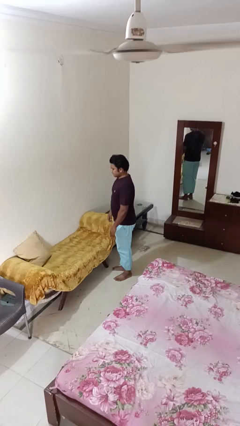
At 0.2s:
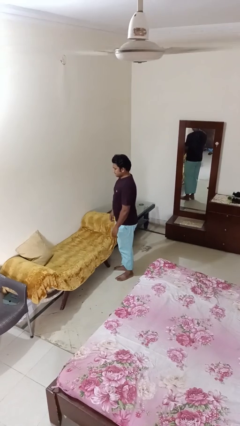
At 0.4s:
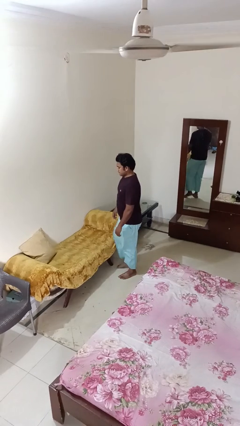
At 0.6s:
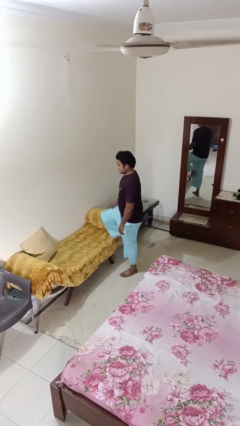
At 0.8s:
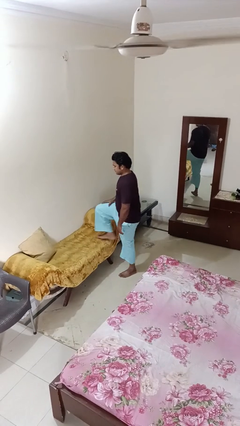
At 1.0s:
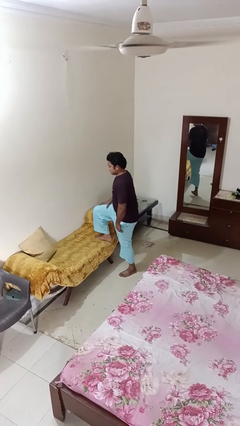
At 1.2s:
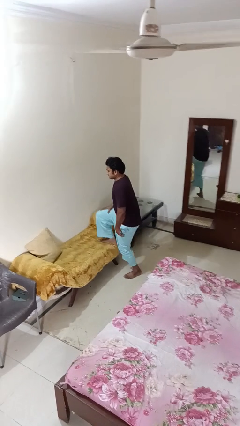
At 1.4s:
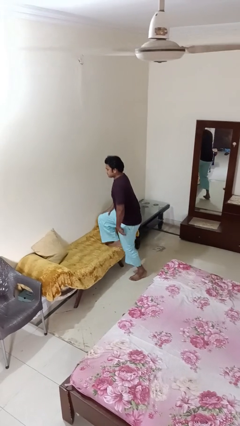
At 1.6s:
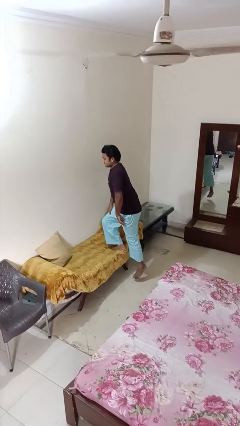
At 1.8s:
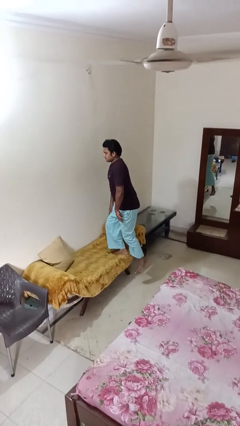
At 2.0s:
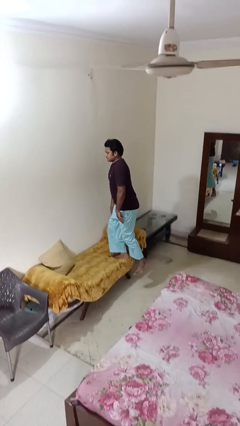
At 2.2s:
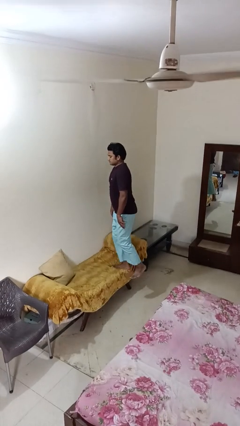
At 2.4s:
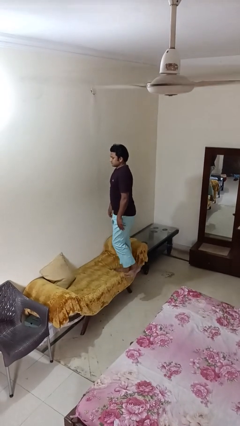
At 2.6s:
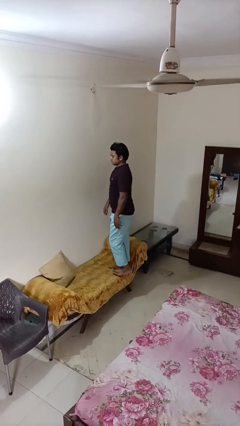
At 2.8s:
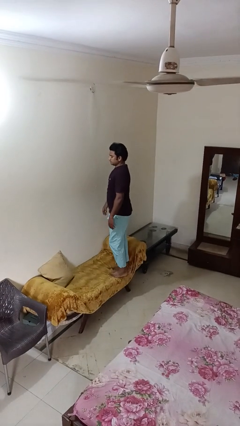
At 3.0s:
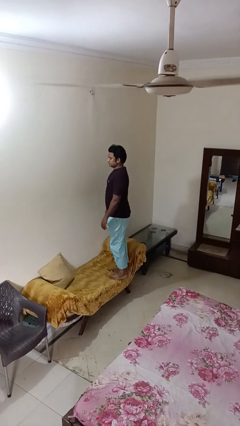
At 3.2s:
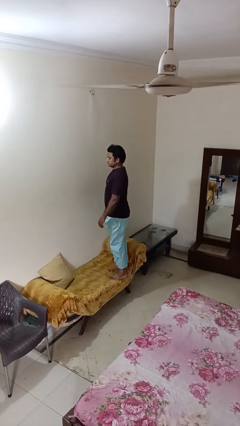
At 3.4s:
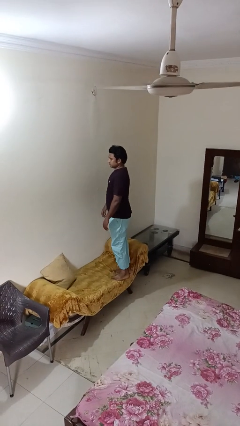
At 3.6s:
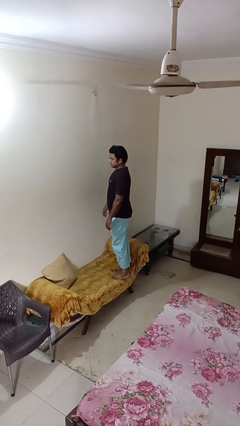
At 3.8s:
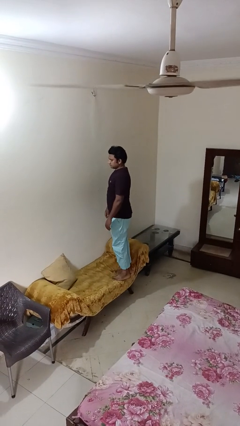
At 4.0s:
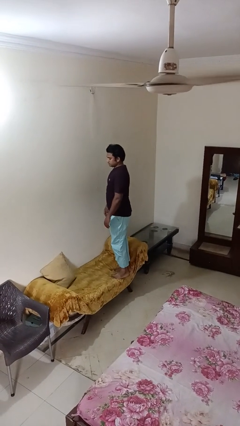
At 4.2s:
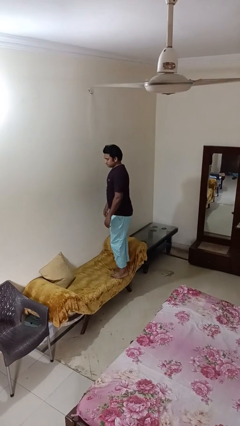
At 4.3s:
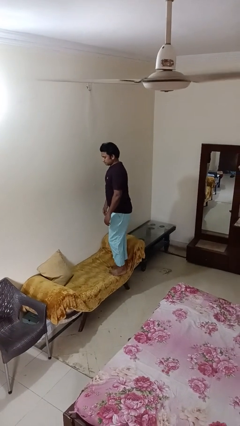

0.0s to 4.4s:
person climbs on couch

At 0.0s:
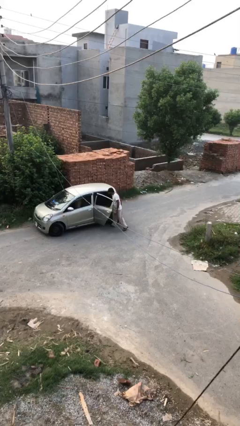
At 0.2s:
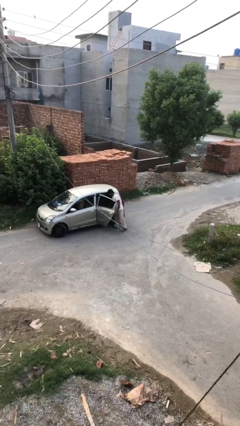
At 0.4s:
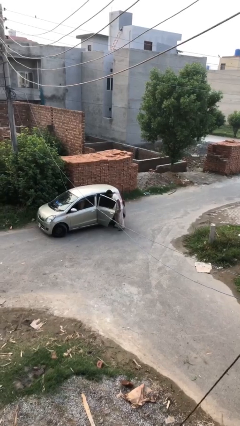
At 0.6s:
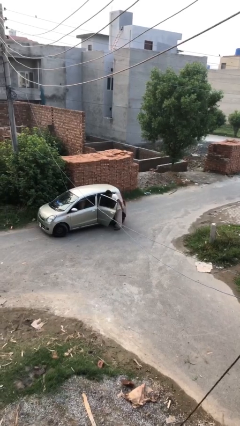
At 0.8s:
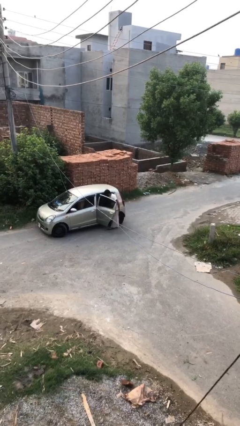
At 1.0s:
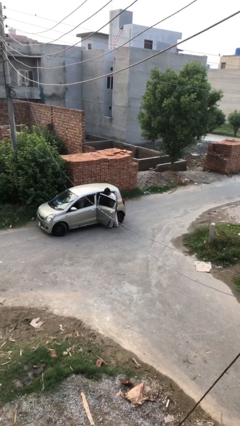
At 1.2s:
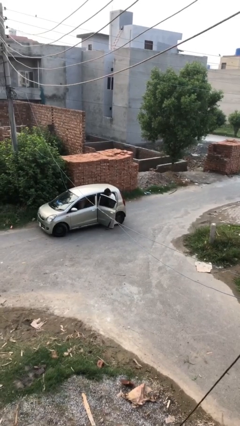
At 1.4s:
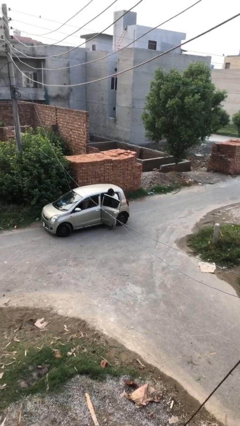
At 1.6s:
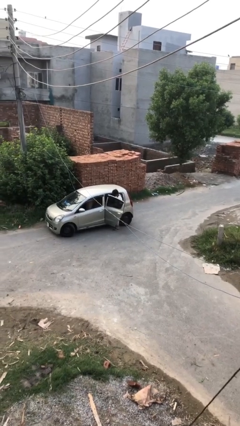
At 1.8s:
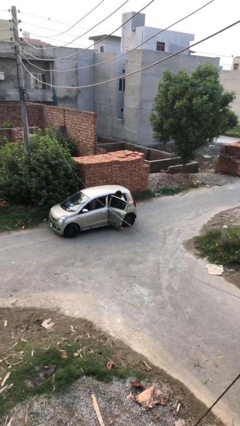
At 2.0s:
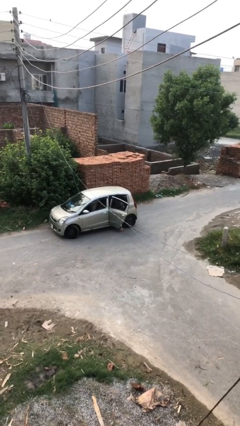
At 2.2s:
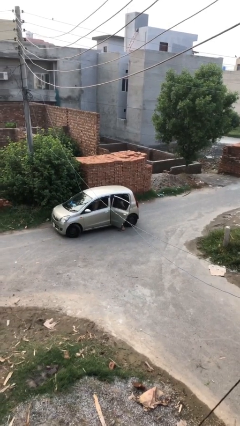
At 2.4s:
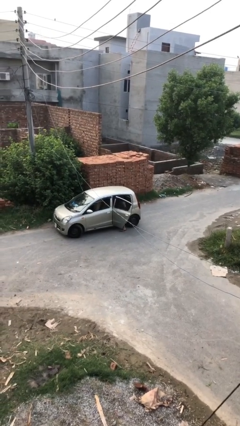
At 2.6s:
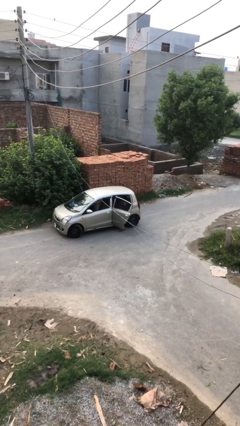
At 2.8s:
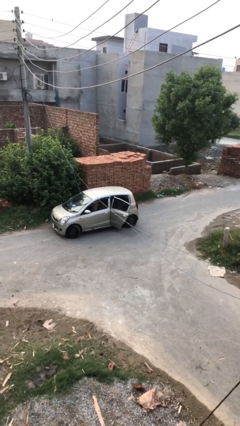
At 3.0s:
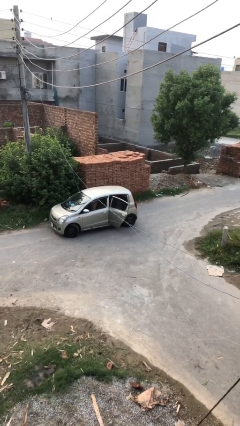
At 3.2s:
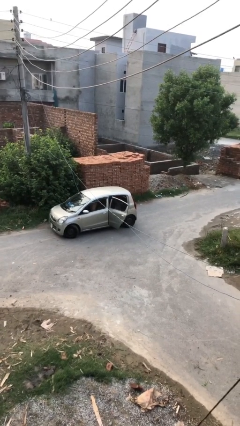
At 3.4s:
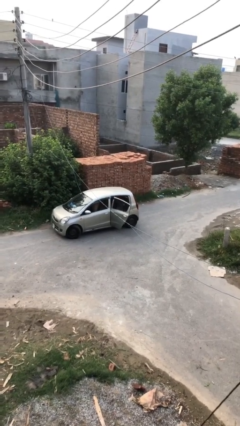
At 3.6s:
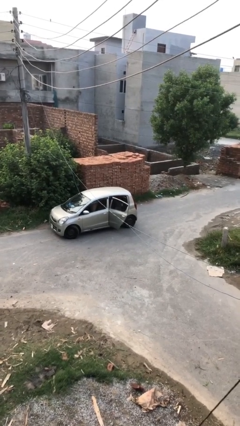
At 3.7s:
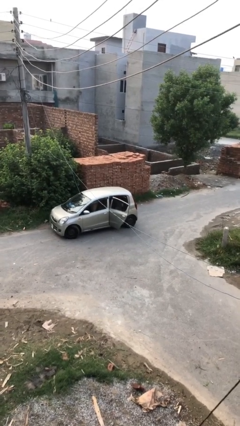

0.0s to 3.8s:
person enters car

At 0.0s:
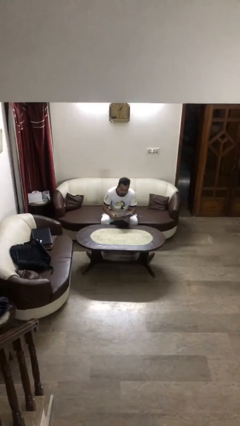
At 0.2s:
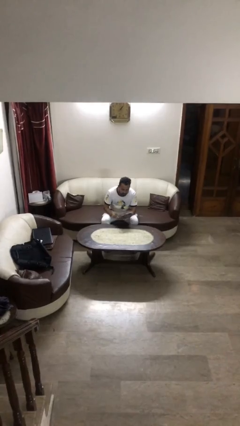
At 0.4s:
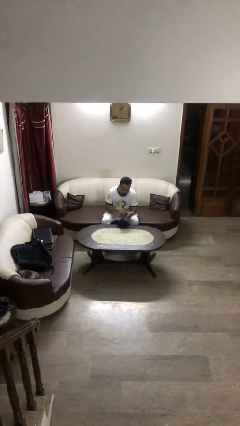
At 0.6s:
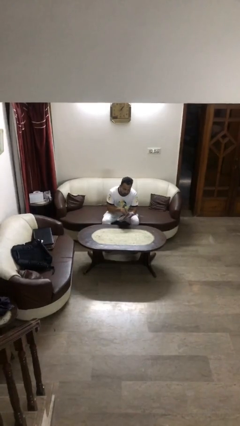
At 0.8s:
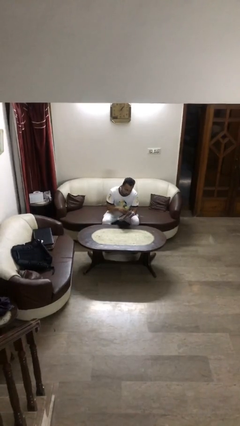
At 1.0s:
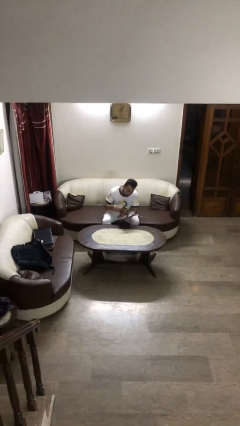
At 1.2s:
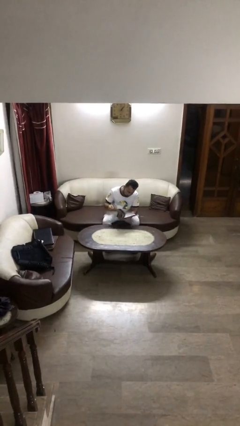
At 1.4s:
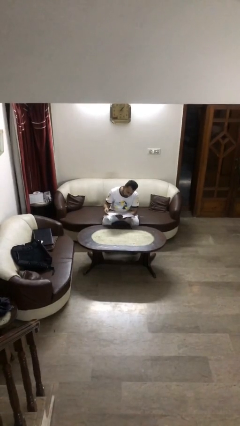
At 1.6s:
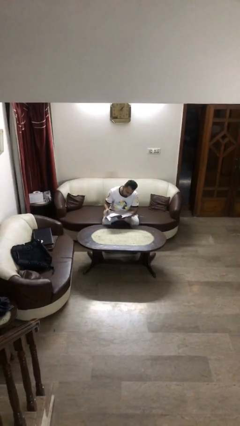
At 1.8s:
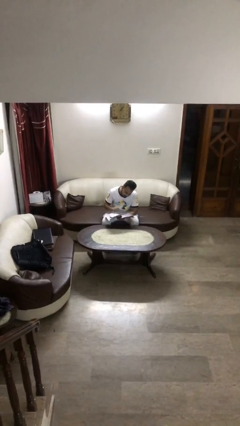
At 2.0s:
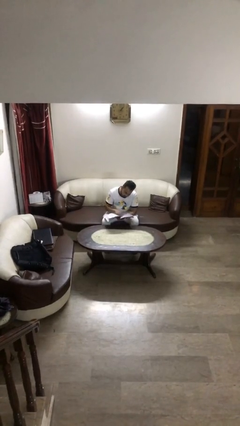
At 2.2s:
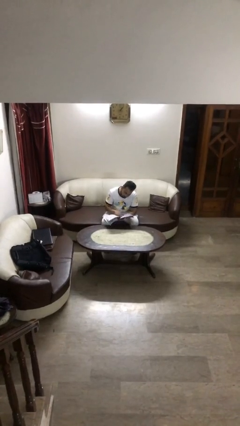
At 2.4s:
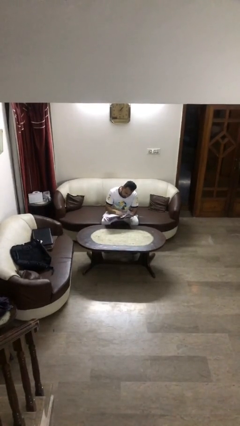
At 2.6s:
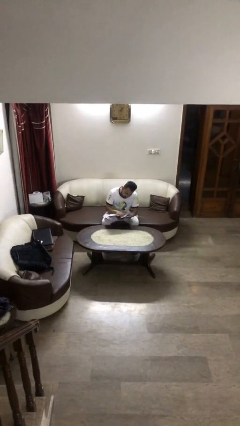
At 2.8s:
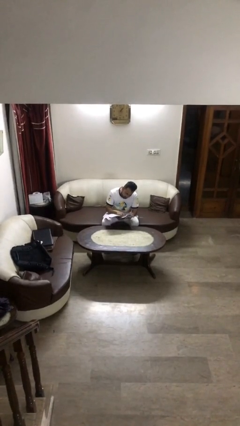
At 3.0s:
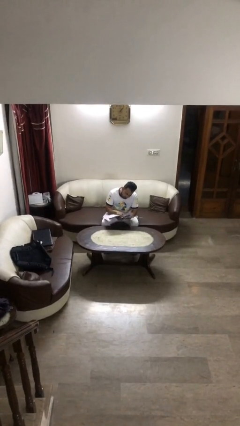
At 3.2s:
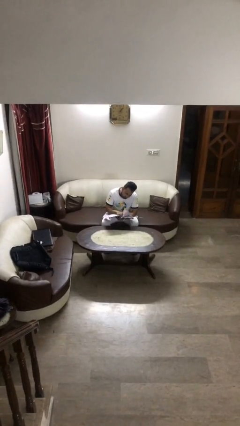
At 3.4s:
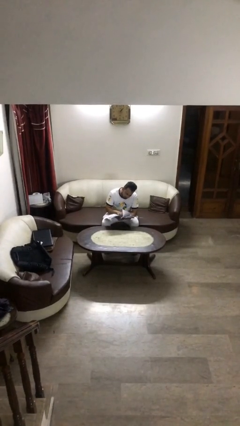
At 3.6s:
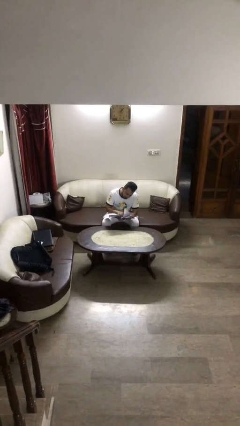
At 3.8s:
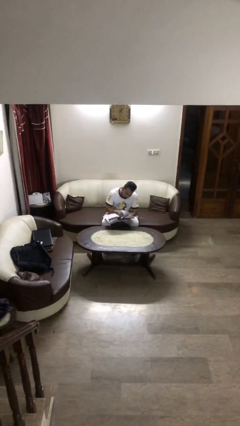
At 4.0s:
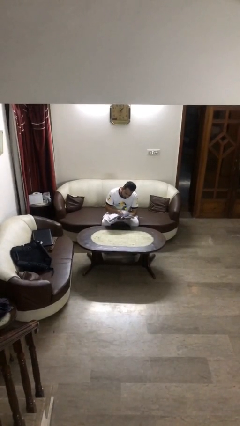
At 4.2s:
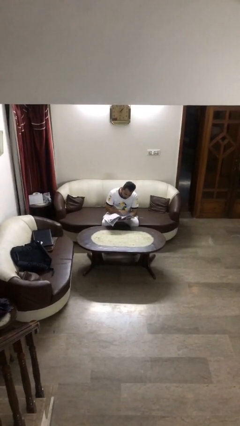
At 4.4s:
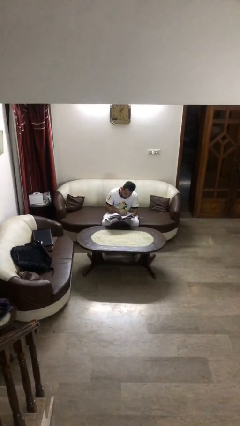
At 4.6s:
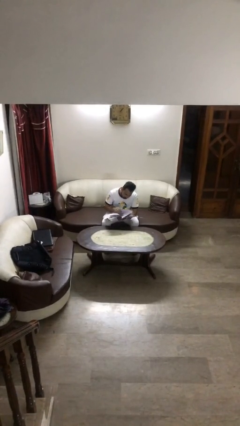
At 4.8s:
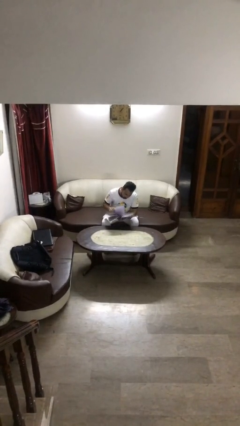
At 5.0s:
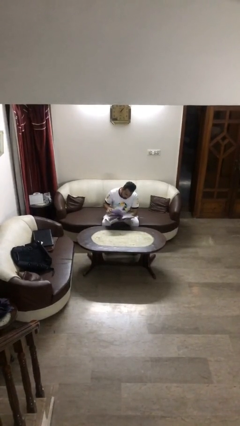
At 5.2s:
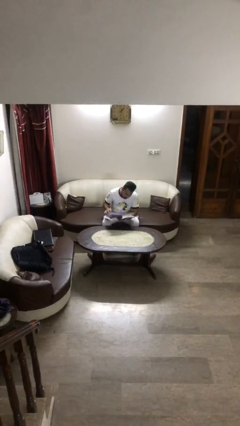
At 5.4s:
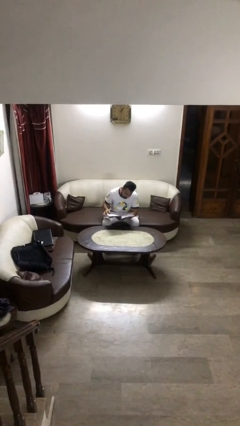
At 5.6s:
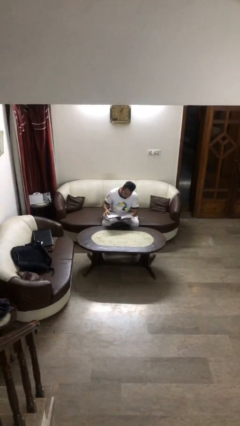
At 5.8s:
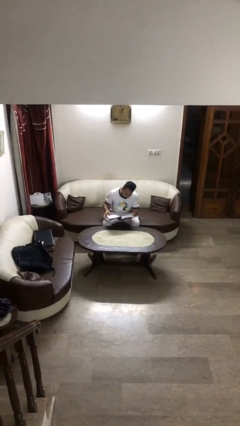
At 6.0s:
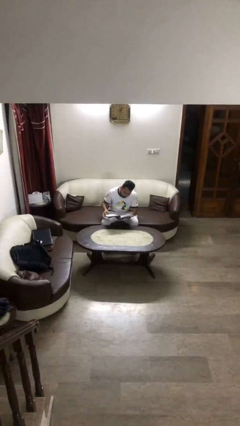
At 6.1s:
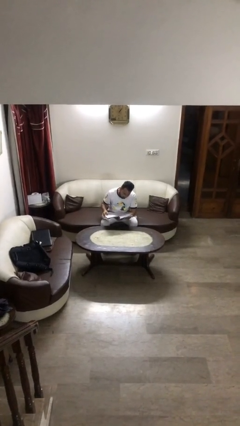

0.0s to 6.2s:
person reads document

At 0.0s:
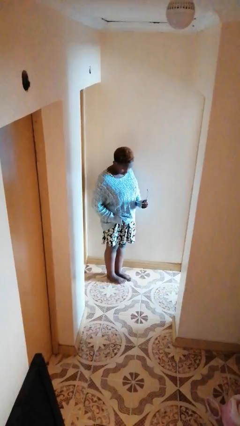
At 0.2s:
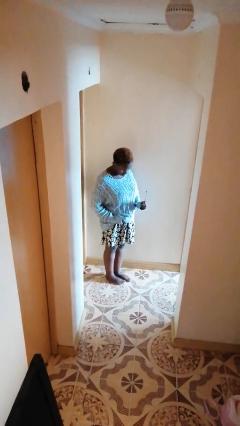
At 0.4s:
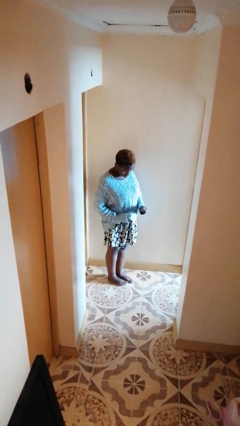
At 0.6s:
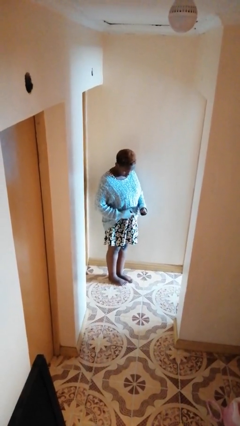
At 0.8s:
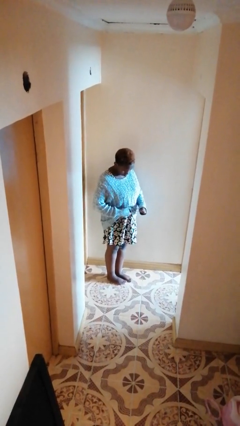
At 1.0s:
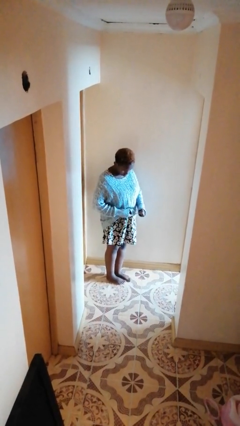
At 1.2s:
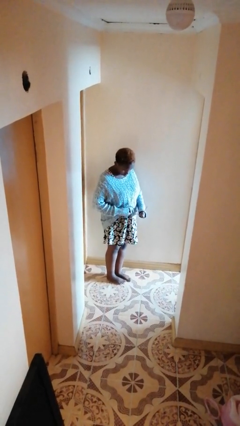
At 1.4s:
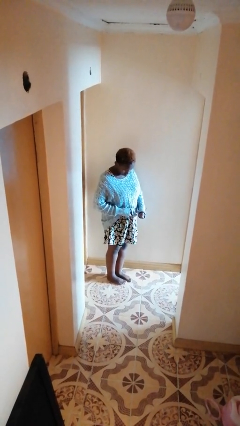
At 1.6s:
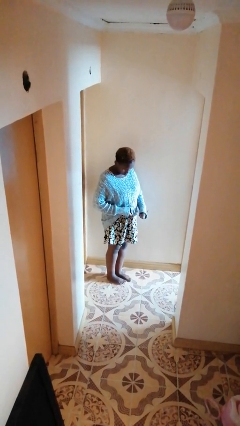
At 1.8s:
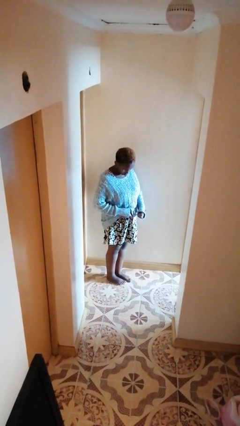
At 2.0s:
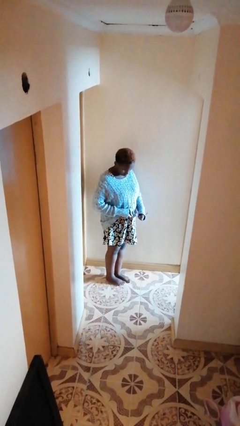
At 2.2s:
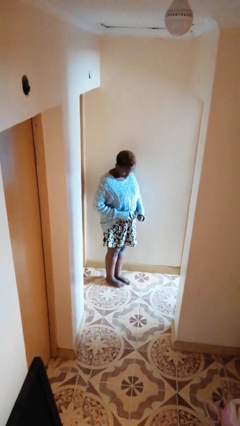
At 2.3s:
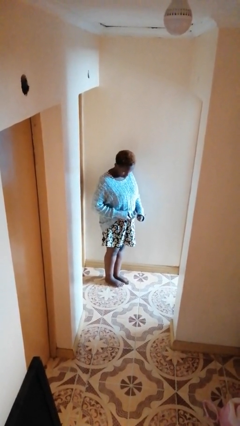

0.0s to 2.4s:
person cleans eyeglasses

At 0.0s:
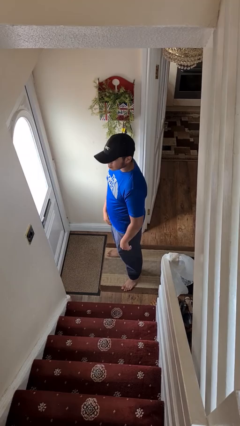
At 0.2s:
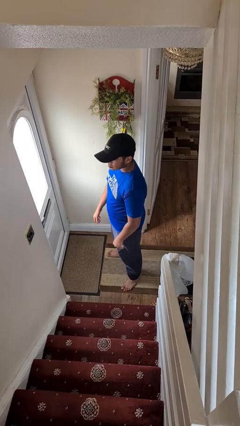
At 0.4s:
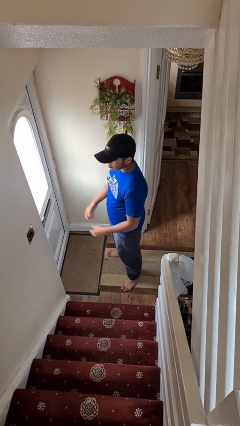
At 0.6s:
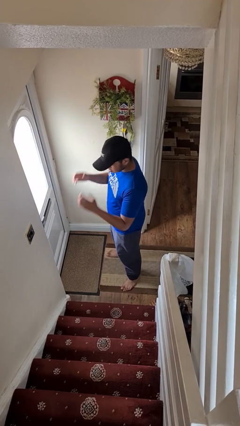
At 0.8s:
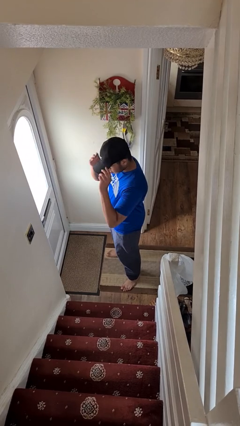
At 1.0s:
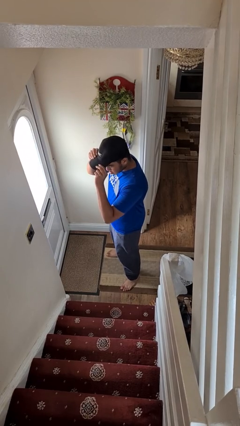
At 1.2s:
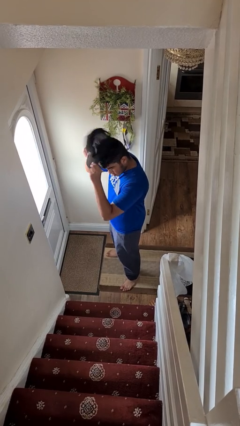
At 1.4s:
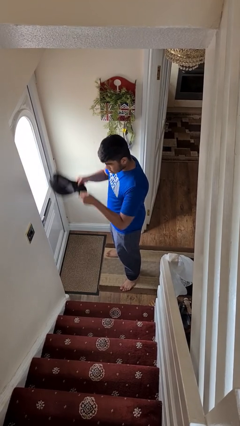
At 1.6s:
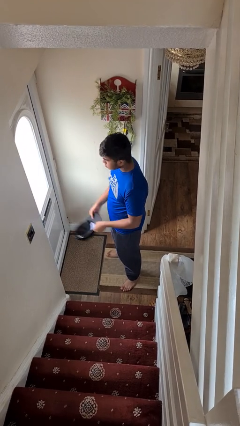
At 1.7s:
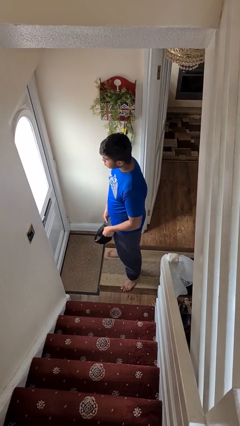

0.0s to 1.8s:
person takes off hat
